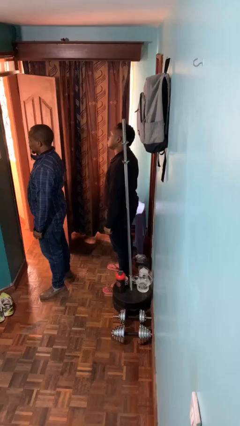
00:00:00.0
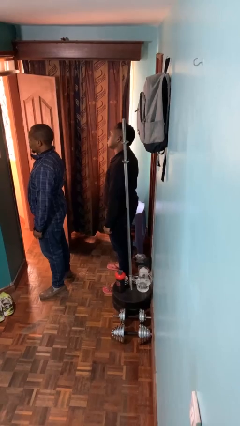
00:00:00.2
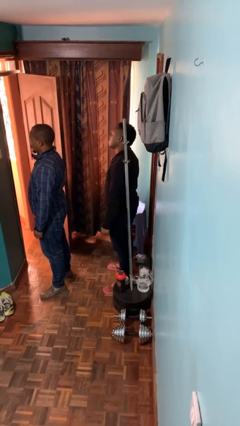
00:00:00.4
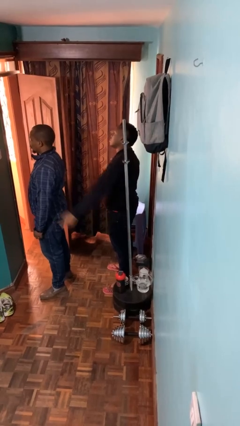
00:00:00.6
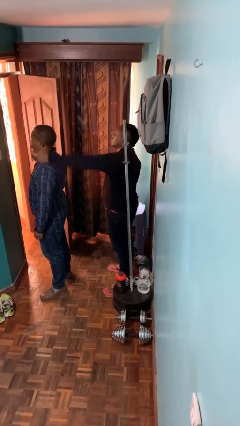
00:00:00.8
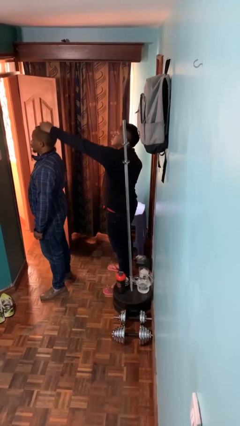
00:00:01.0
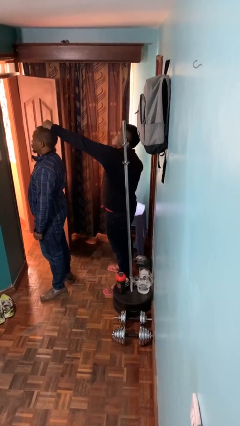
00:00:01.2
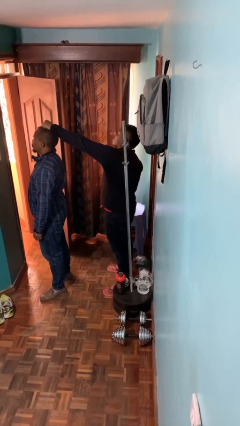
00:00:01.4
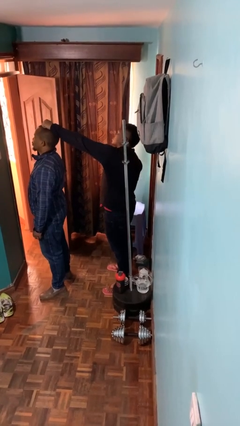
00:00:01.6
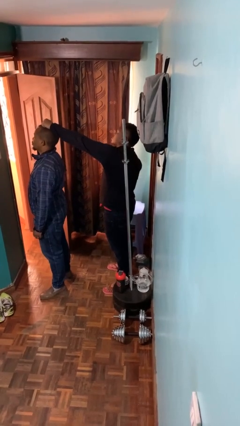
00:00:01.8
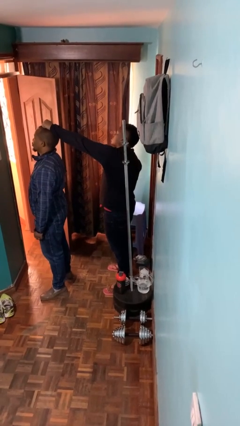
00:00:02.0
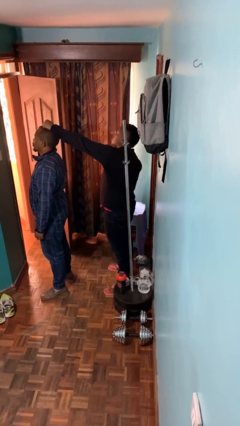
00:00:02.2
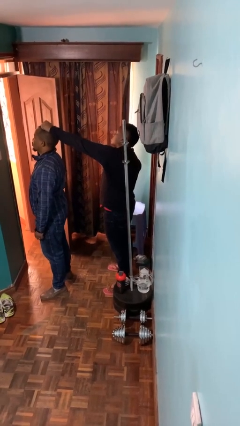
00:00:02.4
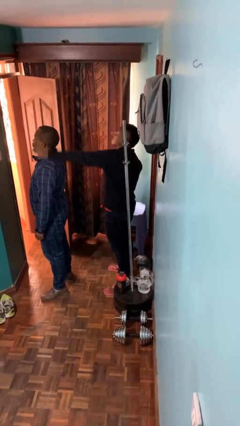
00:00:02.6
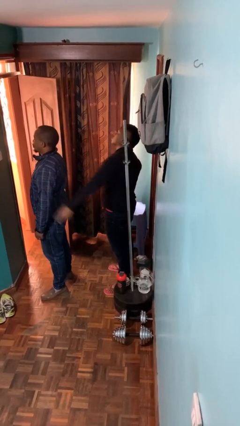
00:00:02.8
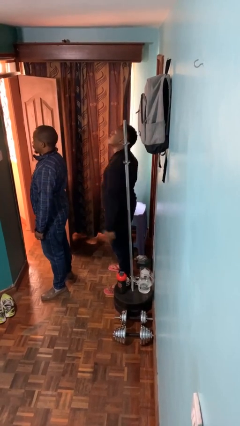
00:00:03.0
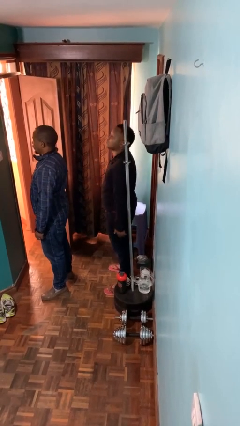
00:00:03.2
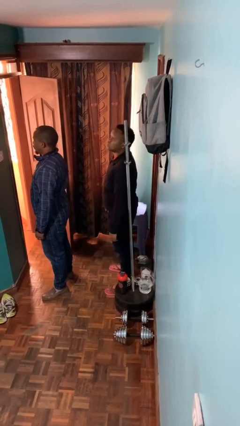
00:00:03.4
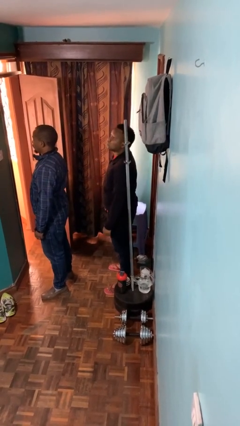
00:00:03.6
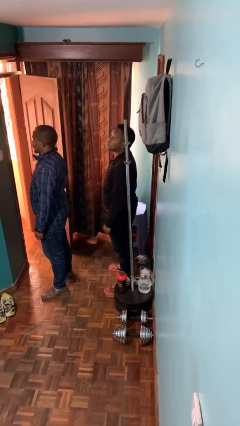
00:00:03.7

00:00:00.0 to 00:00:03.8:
person grabs person by hair

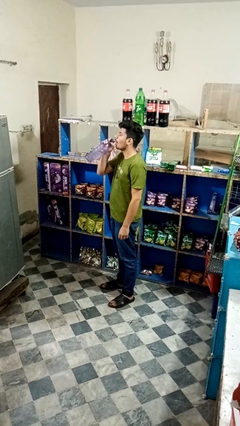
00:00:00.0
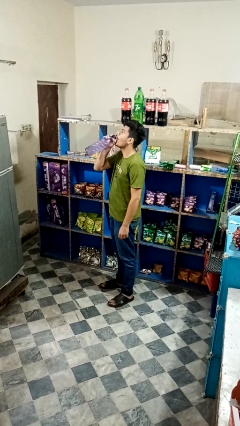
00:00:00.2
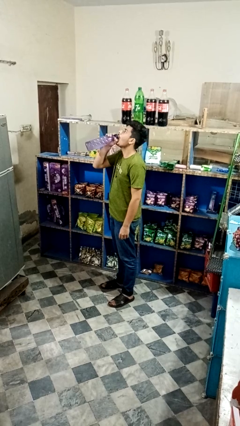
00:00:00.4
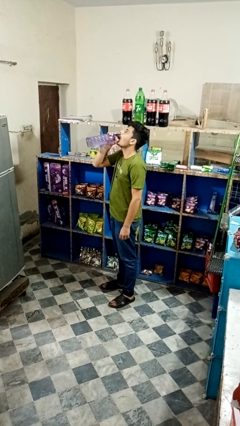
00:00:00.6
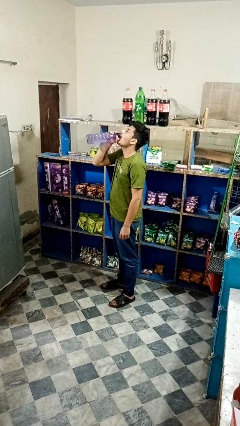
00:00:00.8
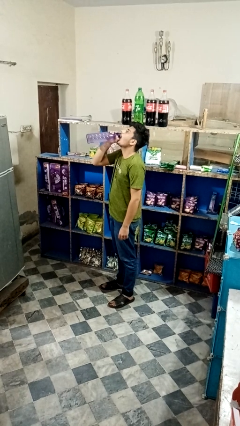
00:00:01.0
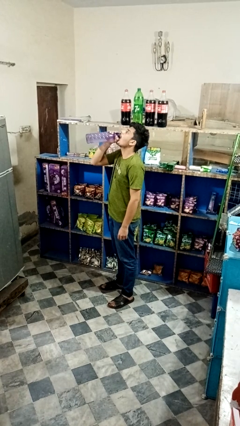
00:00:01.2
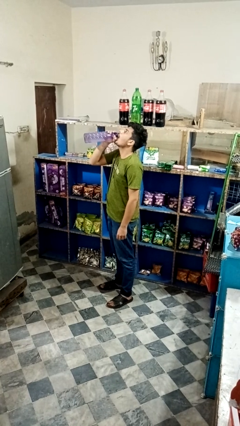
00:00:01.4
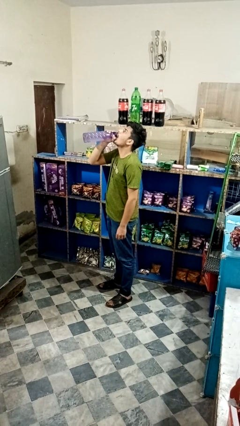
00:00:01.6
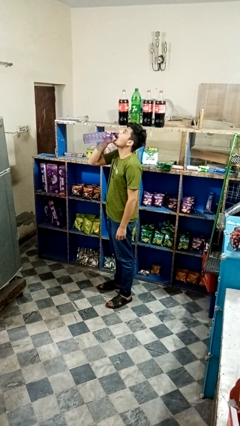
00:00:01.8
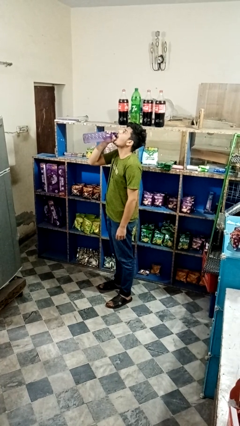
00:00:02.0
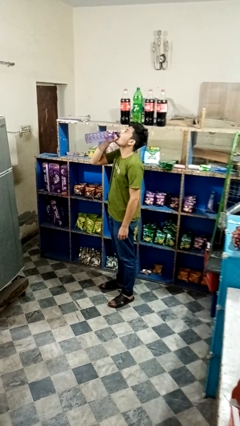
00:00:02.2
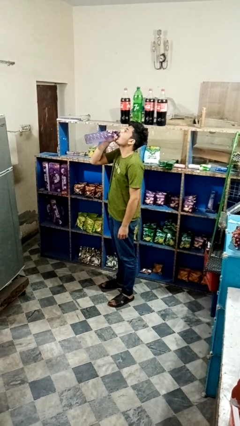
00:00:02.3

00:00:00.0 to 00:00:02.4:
person drinks from bottle

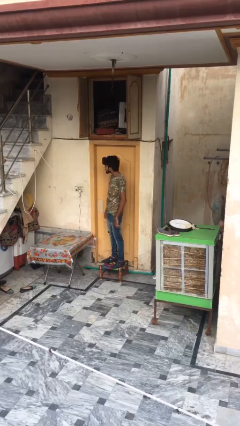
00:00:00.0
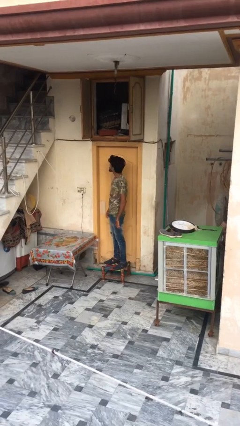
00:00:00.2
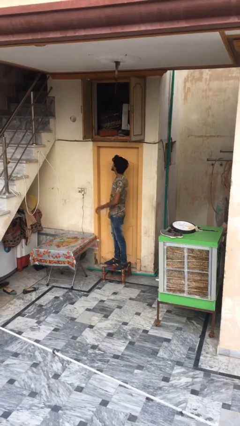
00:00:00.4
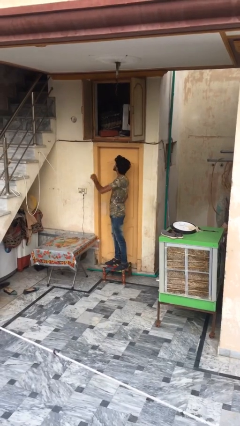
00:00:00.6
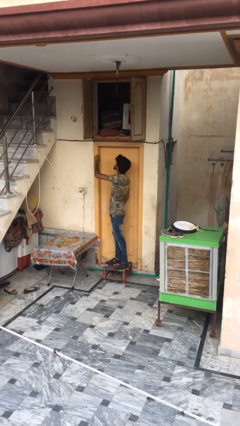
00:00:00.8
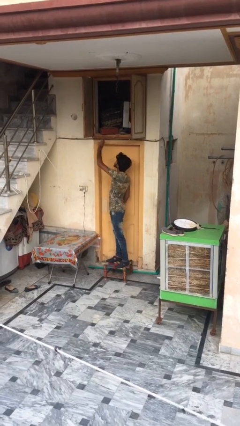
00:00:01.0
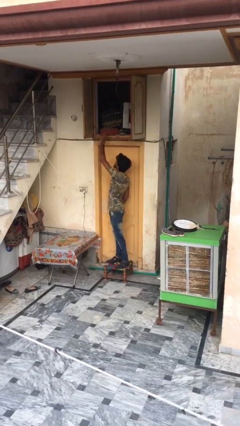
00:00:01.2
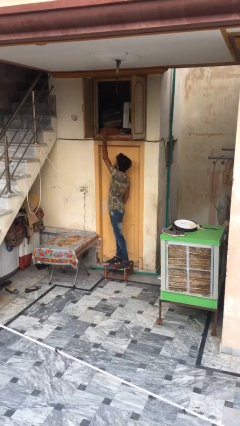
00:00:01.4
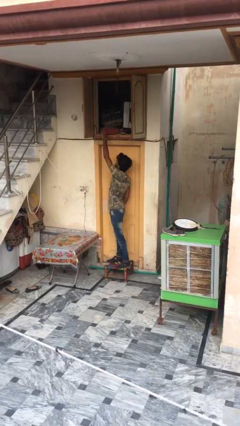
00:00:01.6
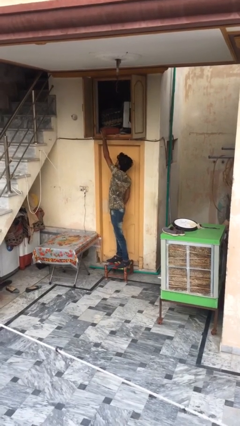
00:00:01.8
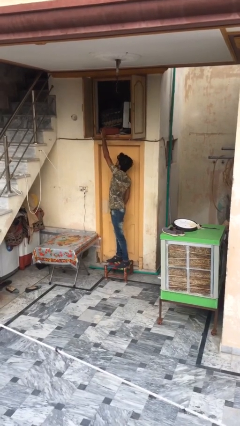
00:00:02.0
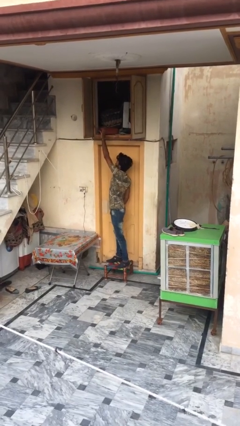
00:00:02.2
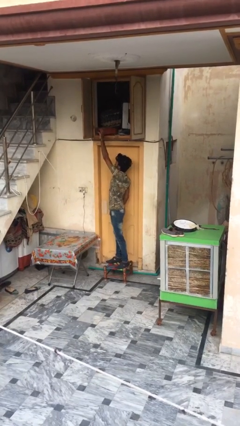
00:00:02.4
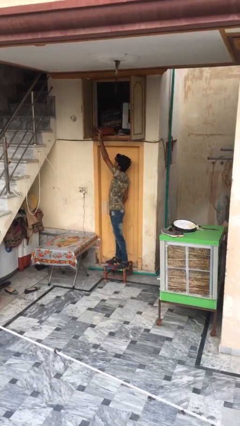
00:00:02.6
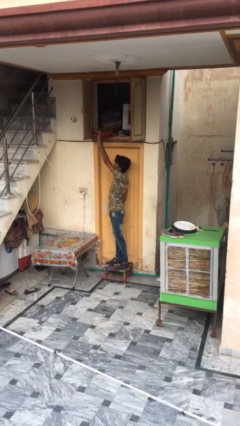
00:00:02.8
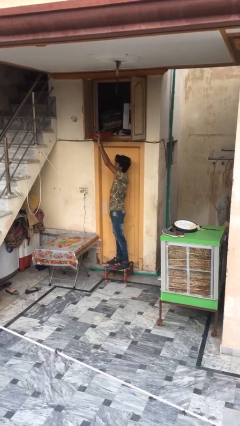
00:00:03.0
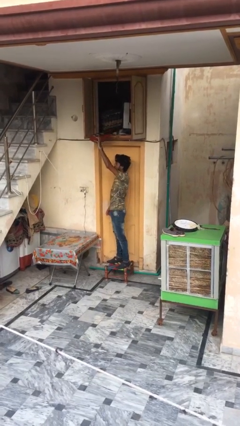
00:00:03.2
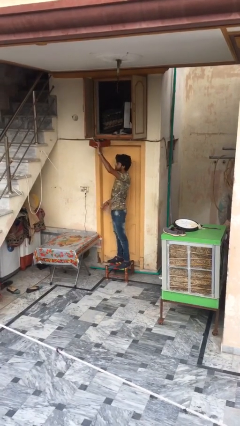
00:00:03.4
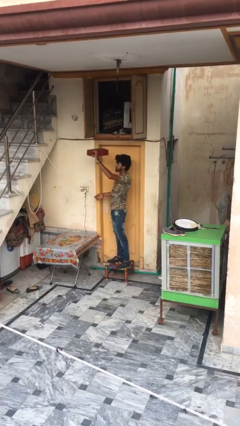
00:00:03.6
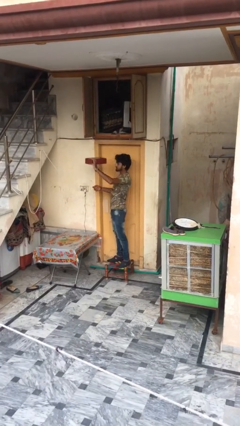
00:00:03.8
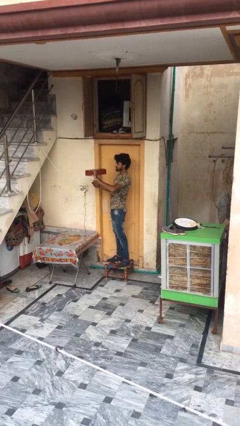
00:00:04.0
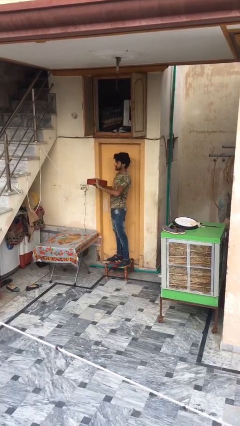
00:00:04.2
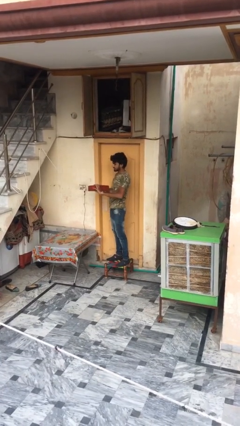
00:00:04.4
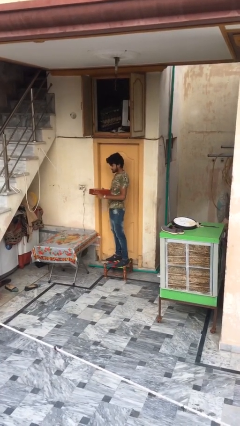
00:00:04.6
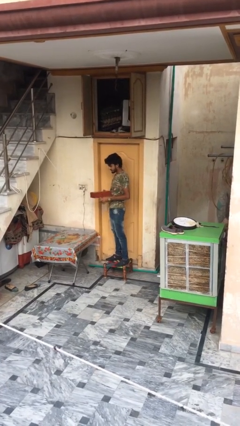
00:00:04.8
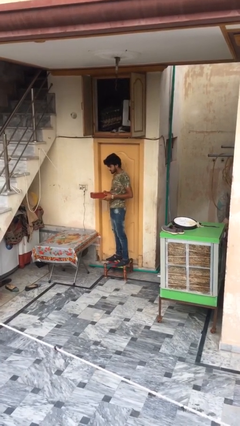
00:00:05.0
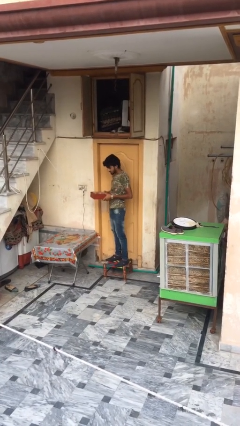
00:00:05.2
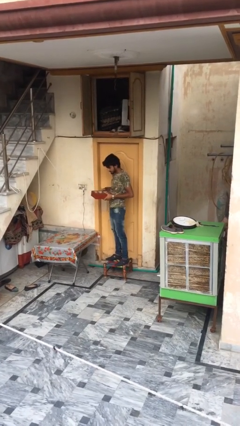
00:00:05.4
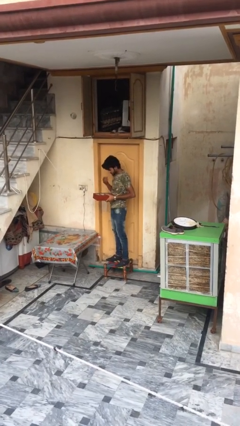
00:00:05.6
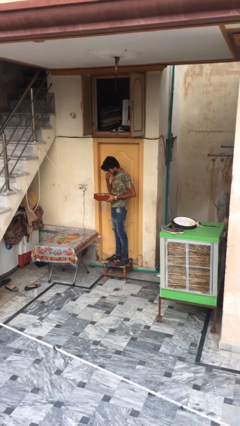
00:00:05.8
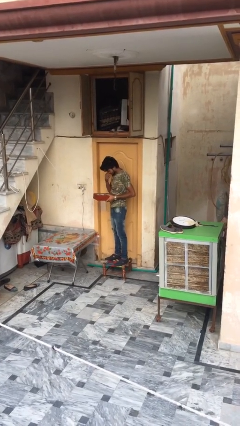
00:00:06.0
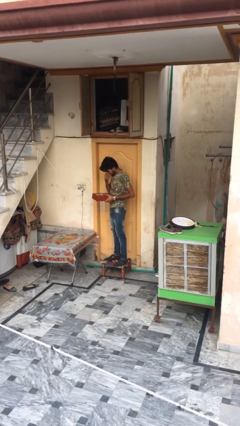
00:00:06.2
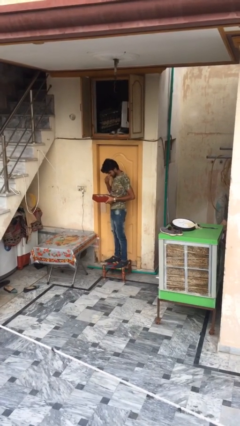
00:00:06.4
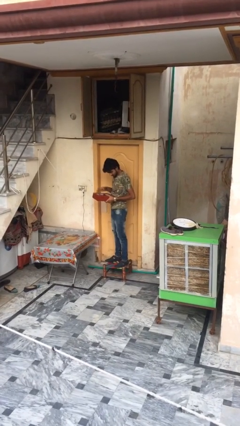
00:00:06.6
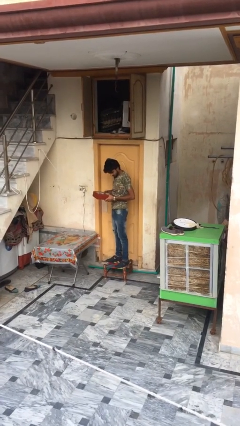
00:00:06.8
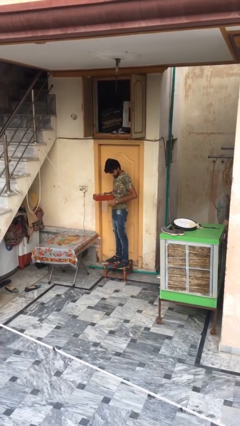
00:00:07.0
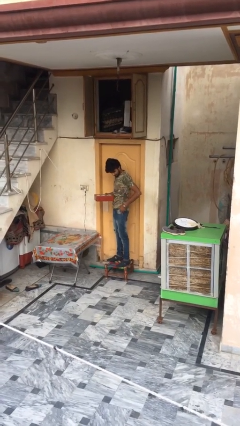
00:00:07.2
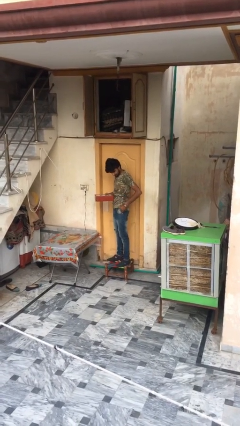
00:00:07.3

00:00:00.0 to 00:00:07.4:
person picks up object from shelf

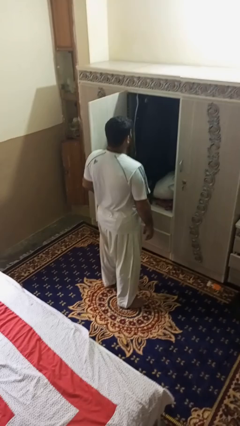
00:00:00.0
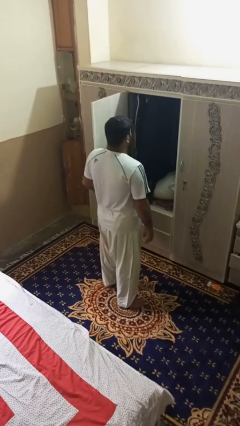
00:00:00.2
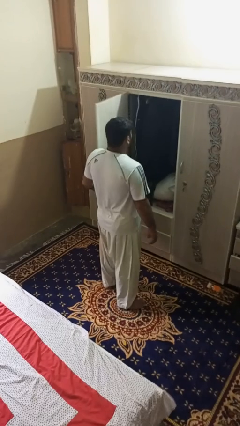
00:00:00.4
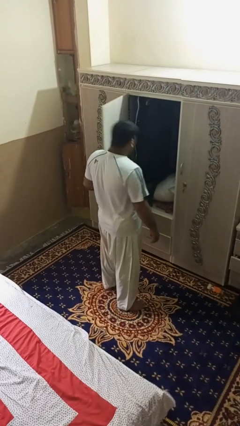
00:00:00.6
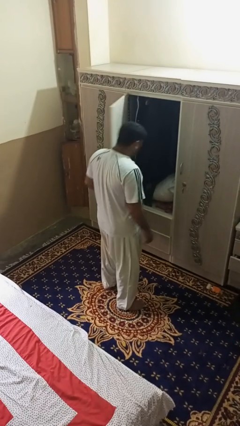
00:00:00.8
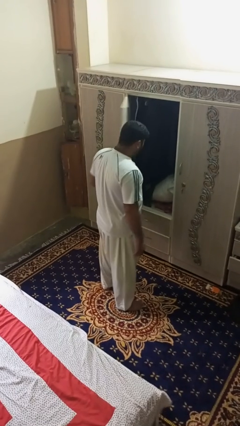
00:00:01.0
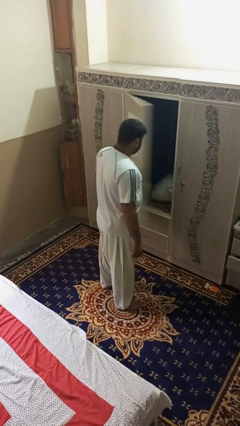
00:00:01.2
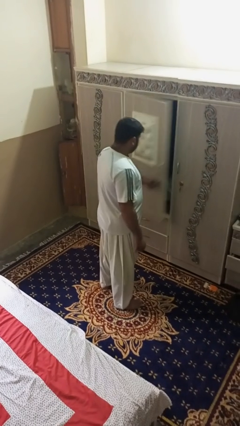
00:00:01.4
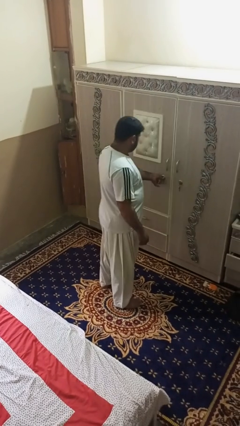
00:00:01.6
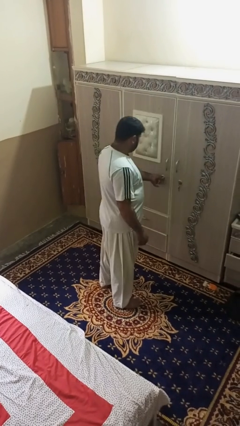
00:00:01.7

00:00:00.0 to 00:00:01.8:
person closes dresser drawer

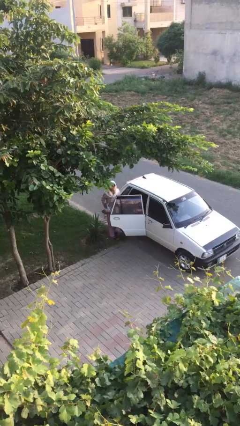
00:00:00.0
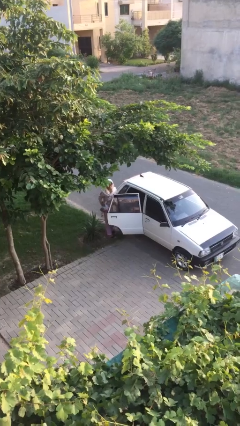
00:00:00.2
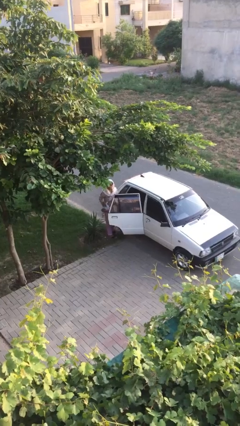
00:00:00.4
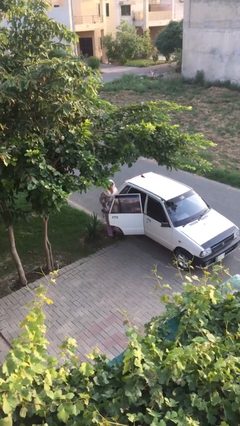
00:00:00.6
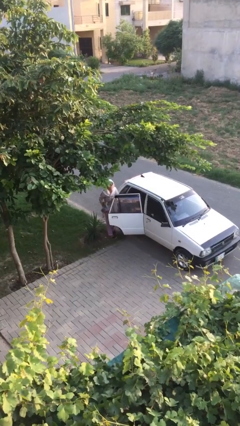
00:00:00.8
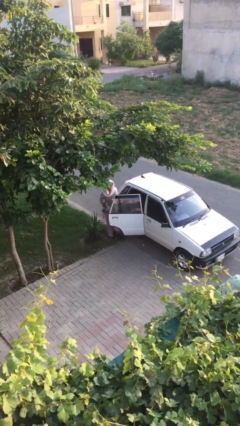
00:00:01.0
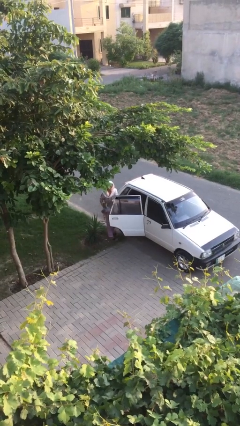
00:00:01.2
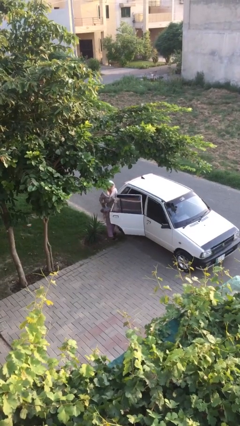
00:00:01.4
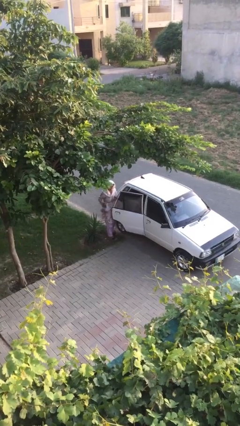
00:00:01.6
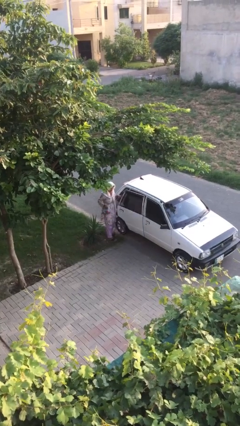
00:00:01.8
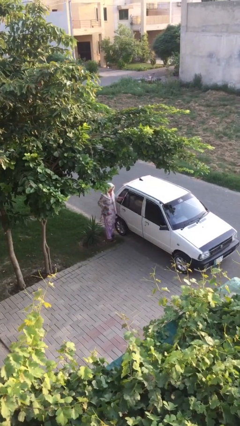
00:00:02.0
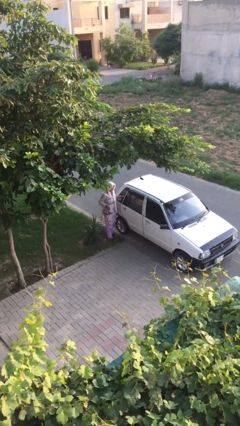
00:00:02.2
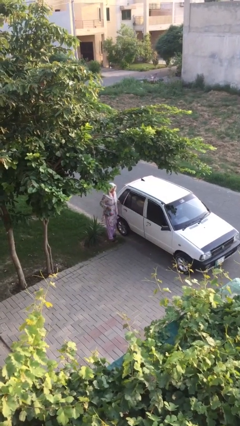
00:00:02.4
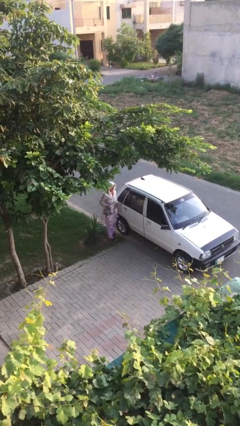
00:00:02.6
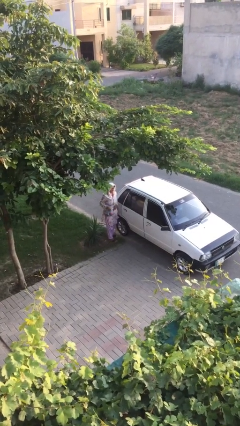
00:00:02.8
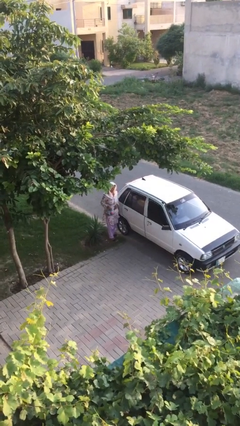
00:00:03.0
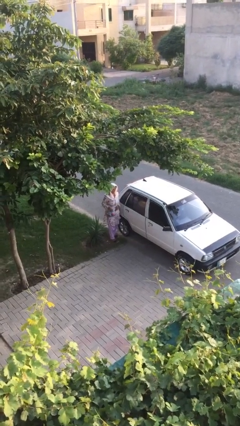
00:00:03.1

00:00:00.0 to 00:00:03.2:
person closes car door
